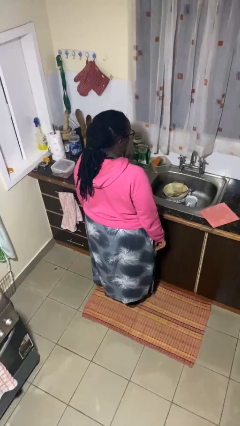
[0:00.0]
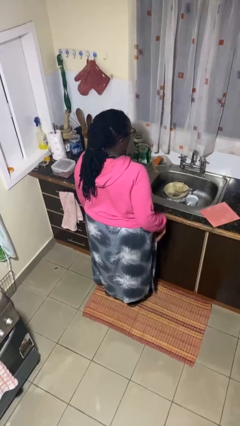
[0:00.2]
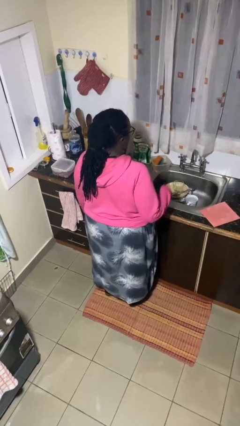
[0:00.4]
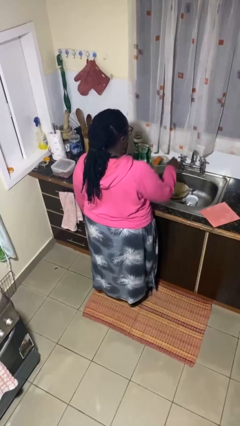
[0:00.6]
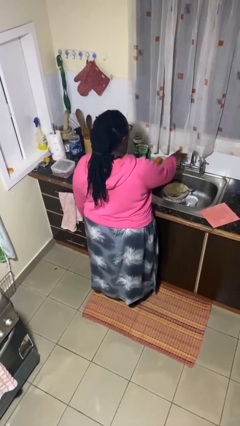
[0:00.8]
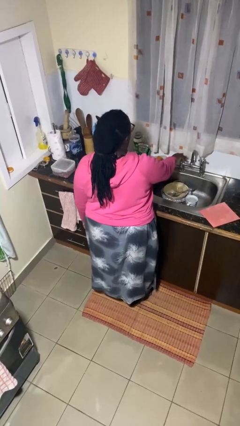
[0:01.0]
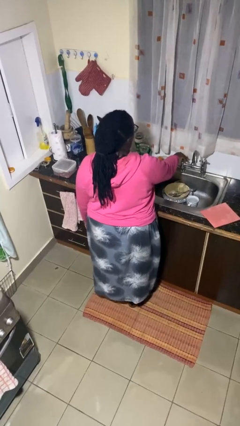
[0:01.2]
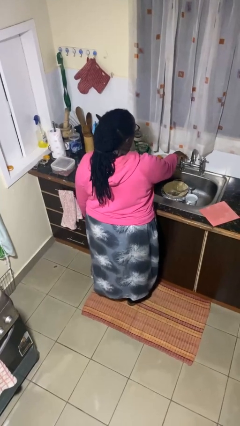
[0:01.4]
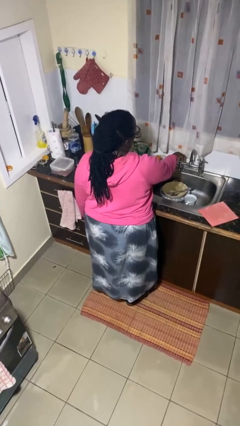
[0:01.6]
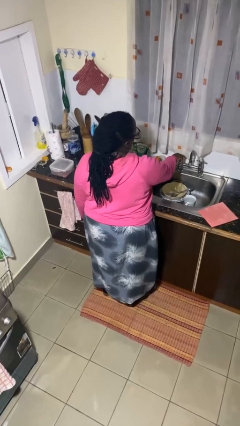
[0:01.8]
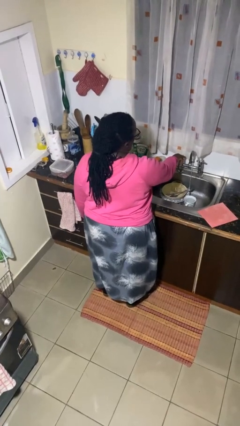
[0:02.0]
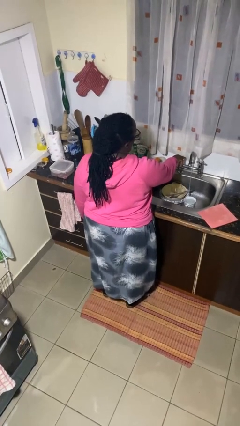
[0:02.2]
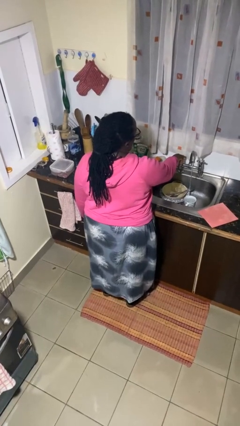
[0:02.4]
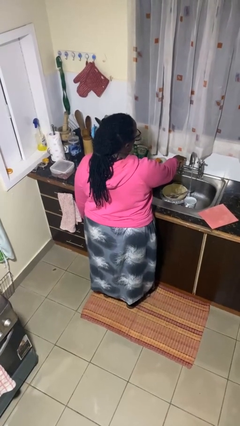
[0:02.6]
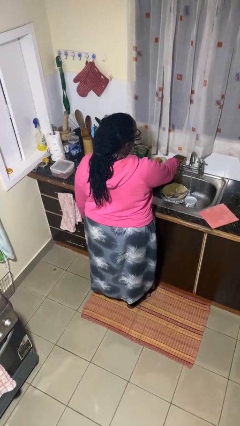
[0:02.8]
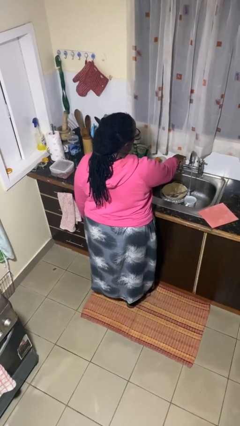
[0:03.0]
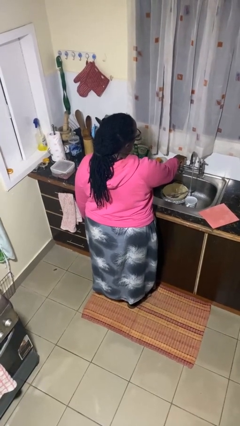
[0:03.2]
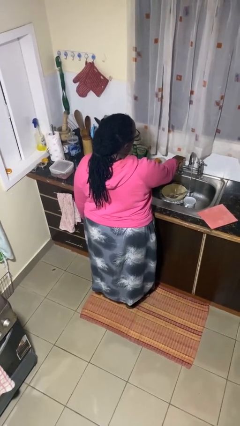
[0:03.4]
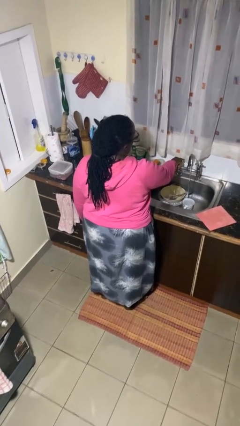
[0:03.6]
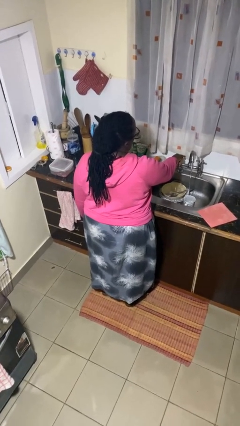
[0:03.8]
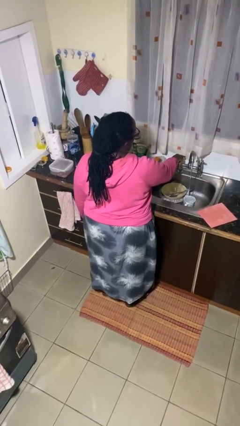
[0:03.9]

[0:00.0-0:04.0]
person turns on faucet

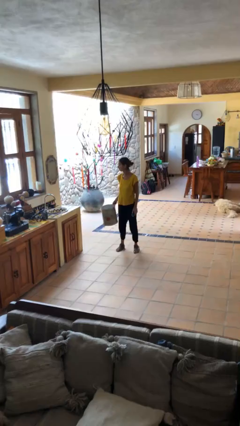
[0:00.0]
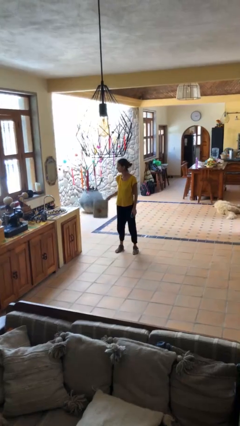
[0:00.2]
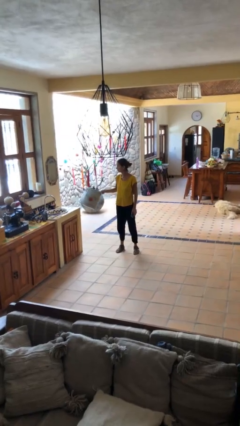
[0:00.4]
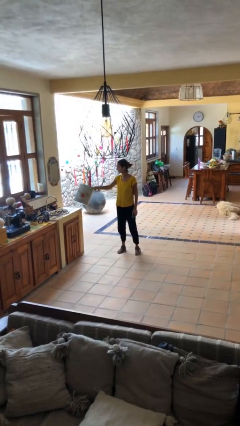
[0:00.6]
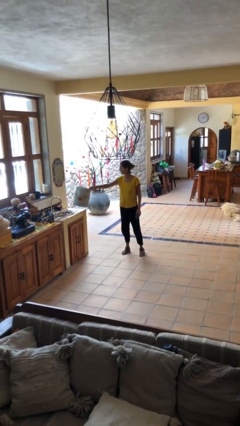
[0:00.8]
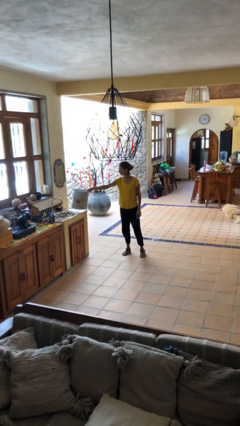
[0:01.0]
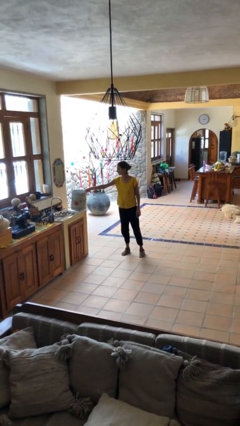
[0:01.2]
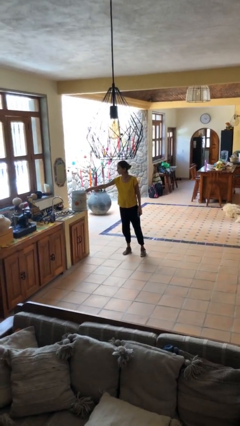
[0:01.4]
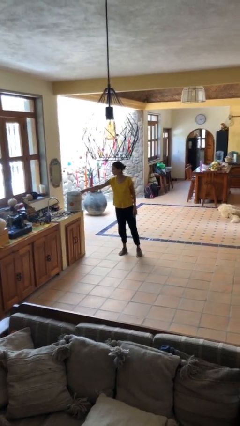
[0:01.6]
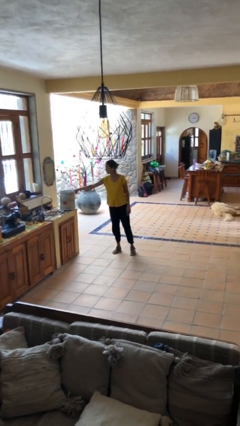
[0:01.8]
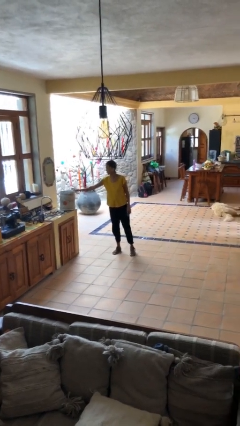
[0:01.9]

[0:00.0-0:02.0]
person puts down object on table

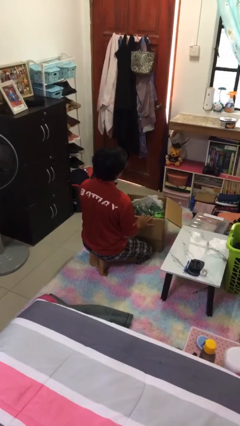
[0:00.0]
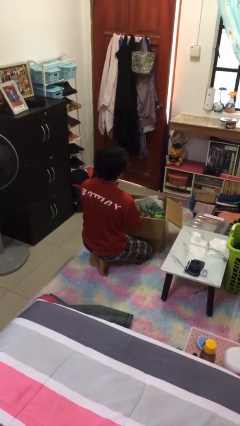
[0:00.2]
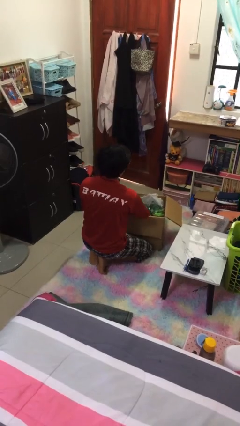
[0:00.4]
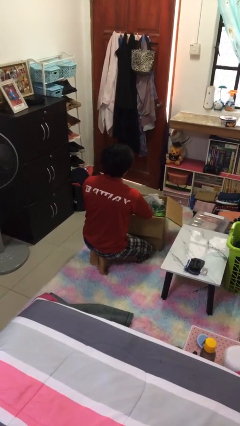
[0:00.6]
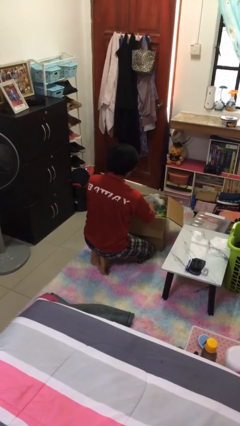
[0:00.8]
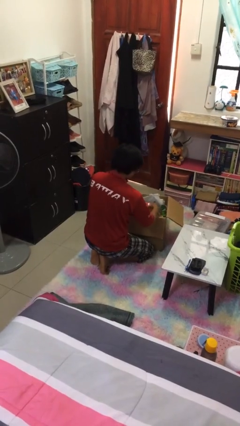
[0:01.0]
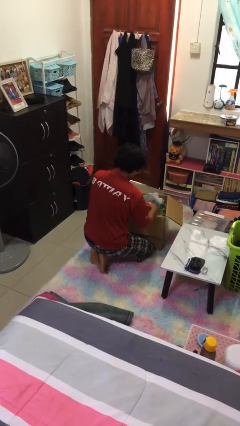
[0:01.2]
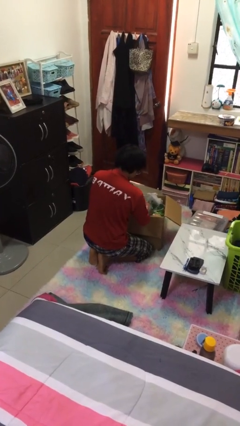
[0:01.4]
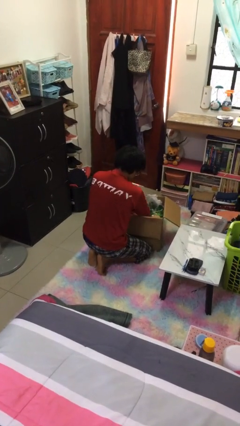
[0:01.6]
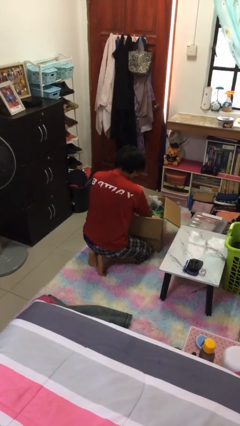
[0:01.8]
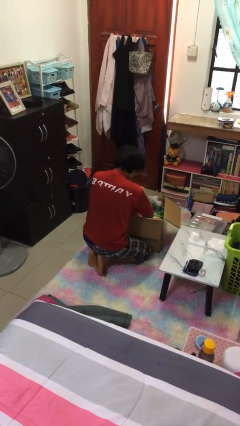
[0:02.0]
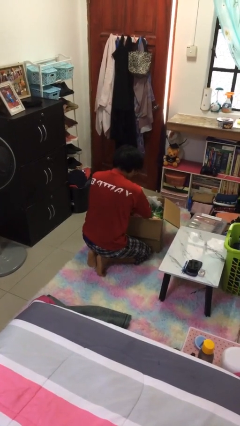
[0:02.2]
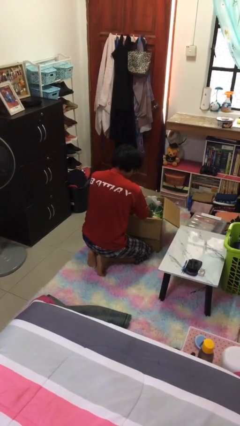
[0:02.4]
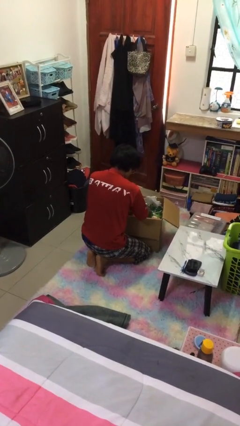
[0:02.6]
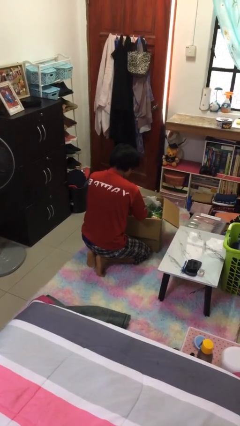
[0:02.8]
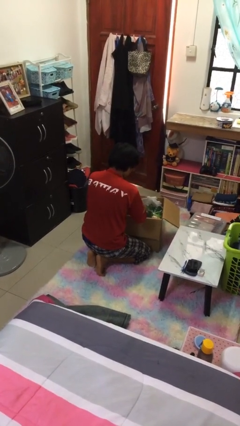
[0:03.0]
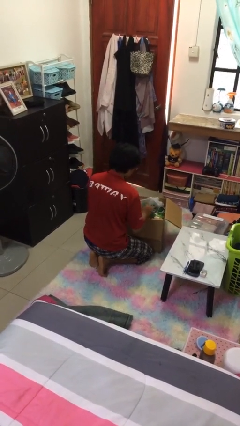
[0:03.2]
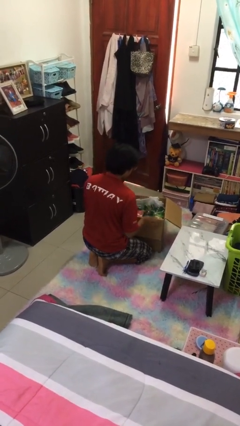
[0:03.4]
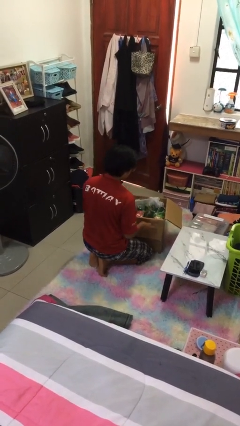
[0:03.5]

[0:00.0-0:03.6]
person searches in box

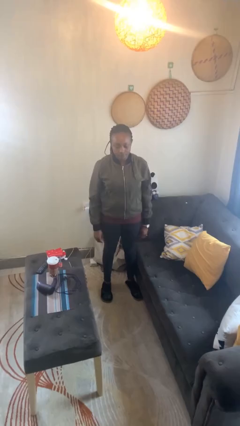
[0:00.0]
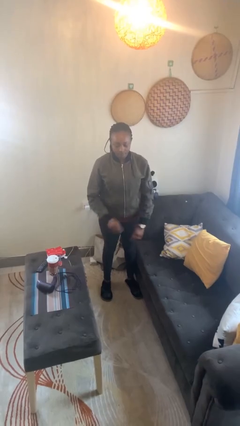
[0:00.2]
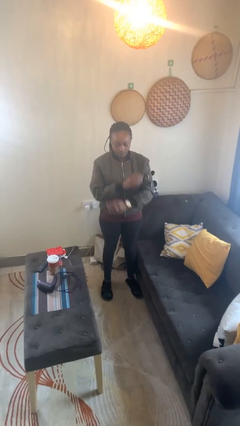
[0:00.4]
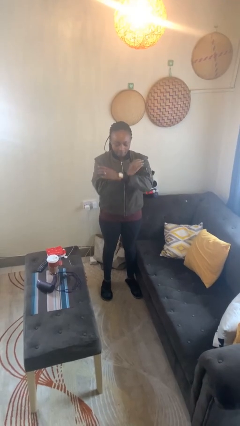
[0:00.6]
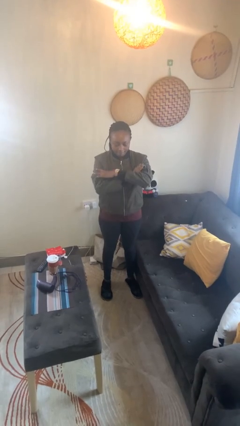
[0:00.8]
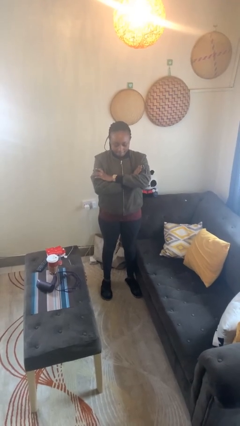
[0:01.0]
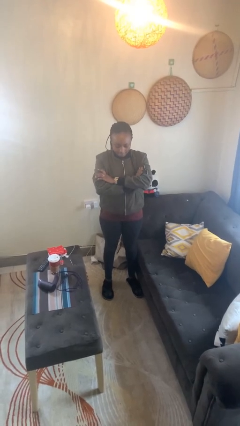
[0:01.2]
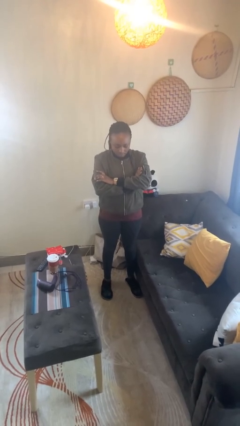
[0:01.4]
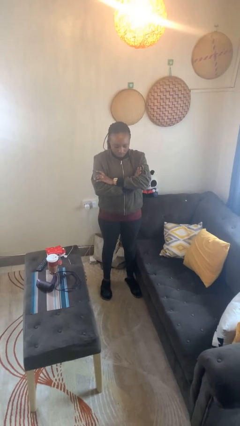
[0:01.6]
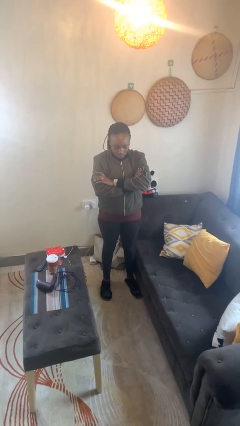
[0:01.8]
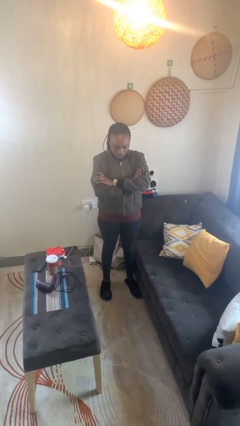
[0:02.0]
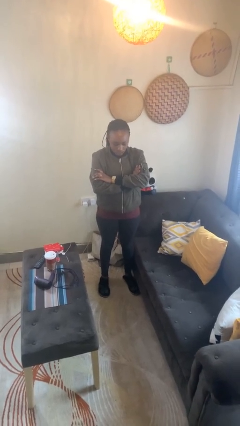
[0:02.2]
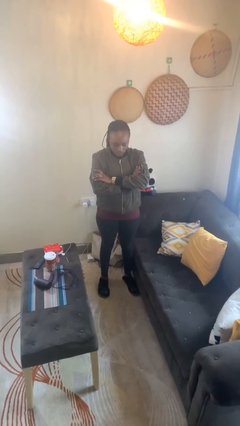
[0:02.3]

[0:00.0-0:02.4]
person gestures arms x

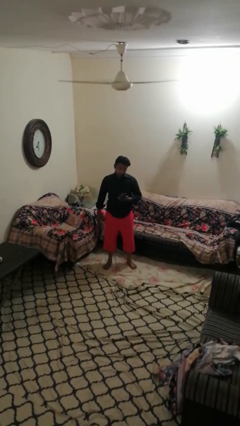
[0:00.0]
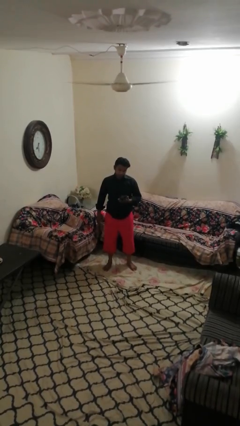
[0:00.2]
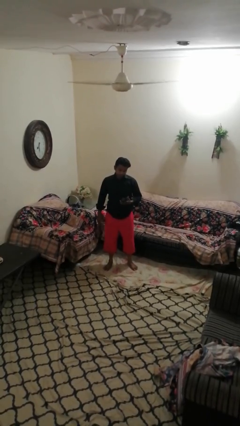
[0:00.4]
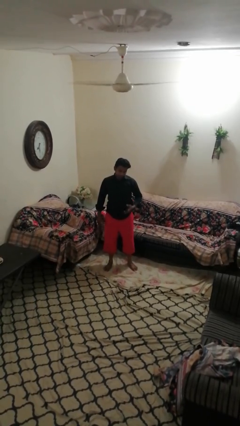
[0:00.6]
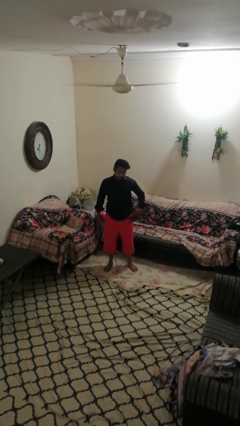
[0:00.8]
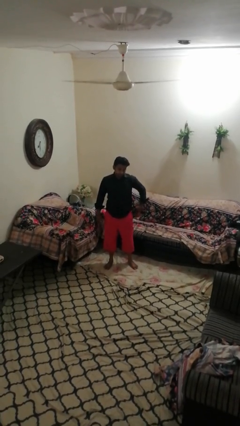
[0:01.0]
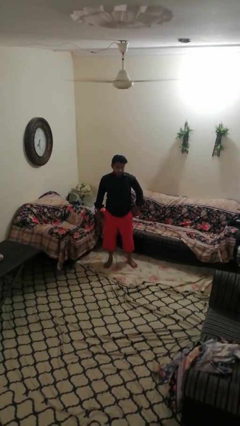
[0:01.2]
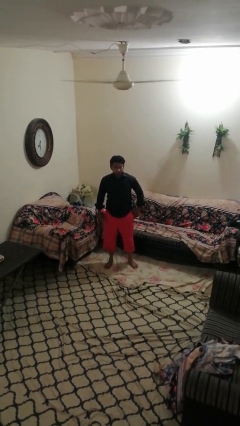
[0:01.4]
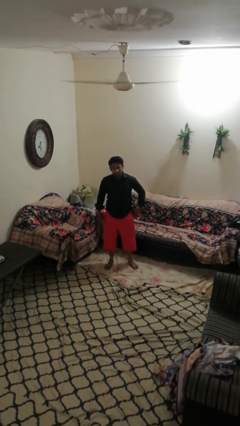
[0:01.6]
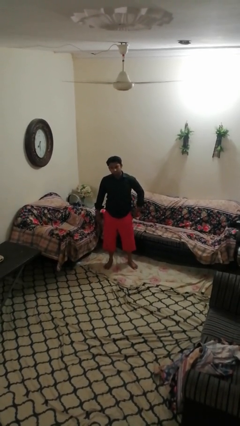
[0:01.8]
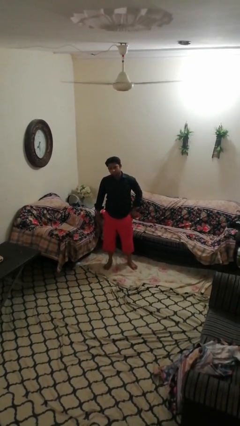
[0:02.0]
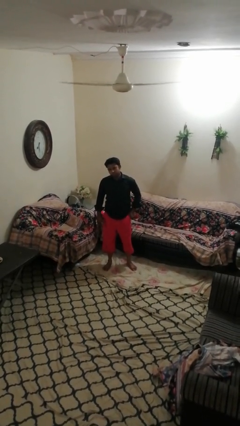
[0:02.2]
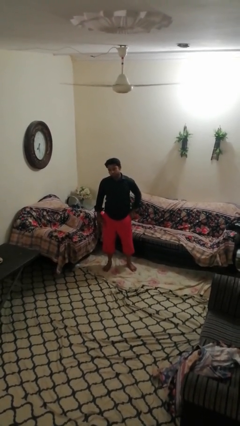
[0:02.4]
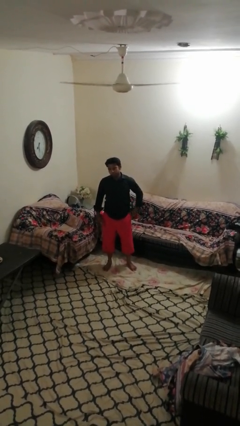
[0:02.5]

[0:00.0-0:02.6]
person puts phone into pocket

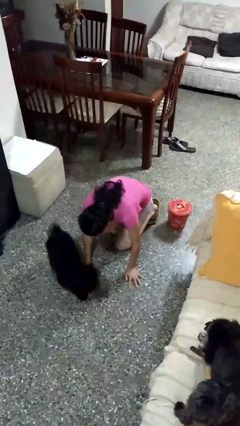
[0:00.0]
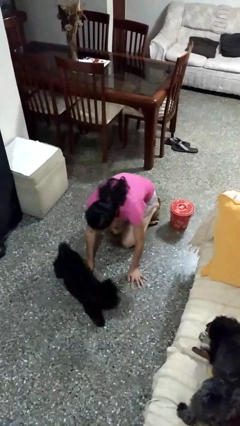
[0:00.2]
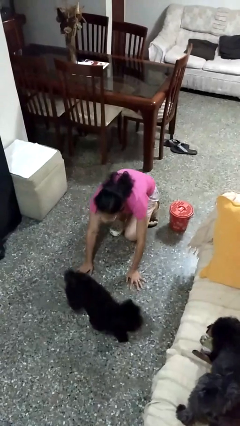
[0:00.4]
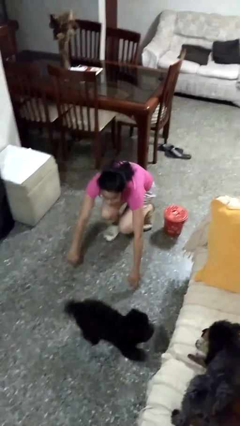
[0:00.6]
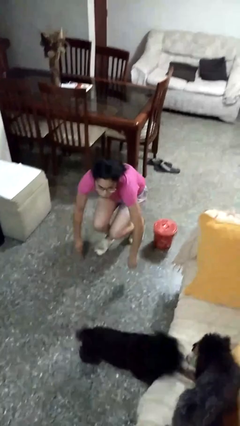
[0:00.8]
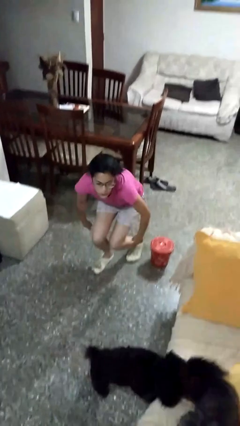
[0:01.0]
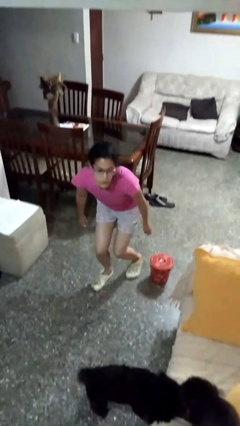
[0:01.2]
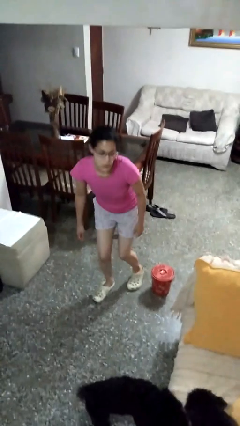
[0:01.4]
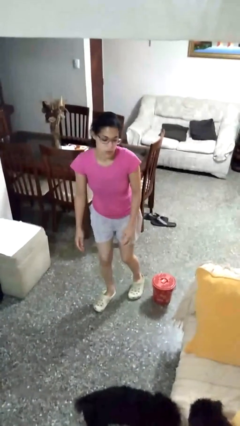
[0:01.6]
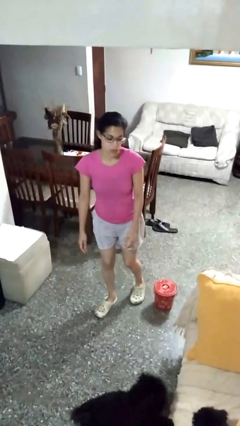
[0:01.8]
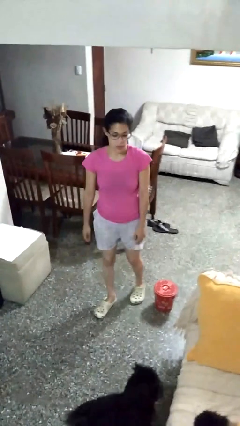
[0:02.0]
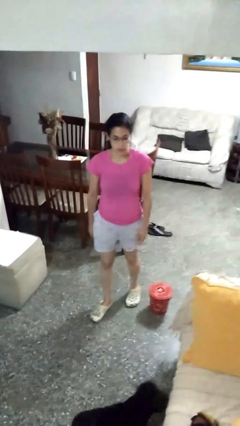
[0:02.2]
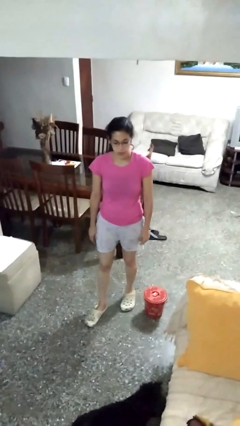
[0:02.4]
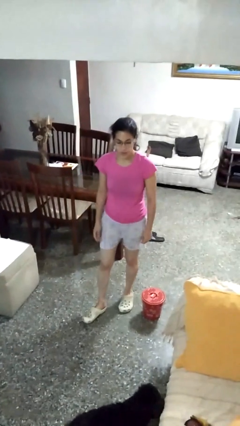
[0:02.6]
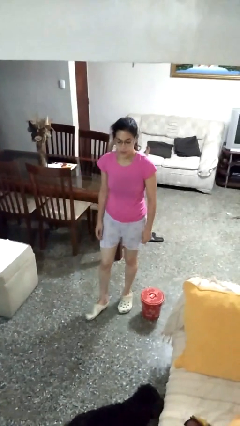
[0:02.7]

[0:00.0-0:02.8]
person stands up from floor

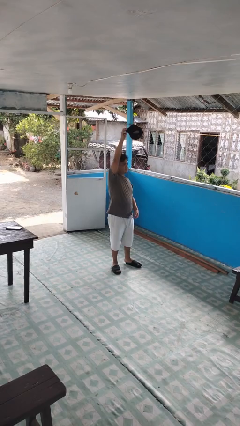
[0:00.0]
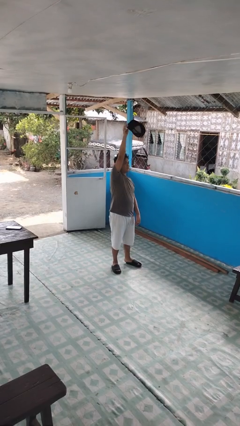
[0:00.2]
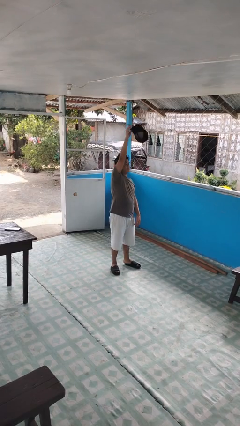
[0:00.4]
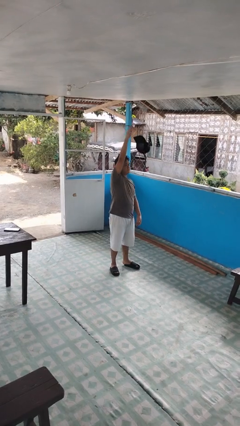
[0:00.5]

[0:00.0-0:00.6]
person drops object
